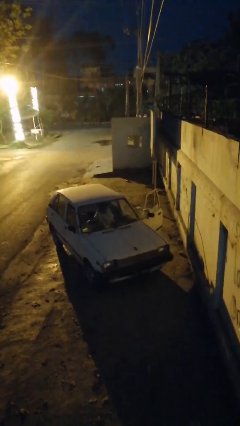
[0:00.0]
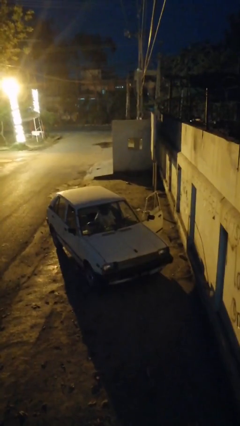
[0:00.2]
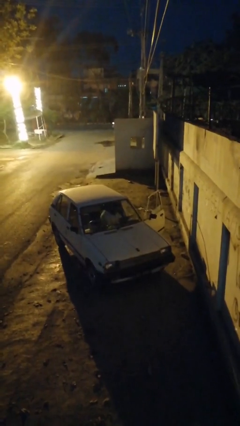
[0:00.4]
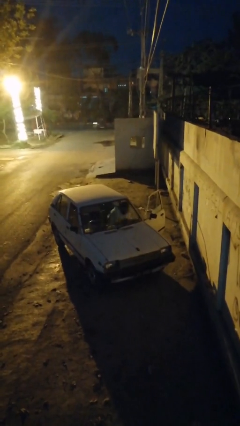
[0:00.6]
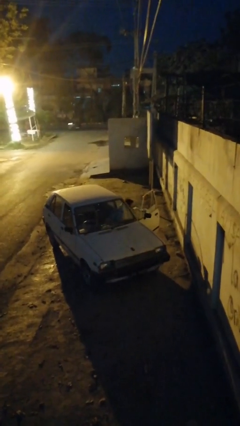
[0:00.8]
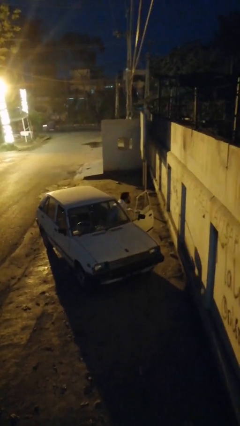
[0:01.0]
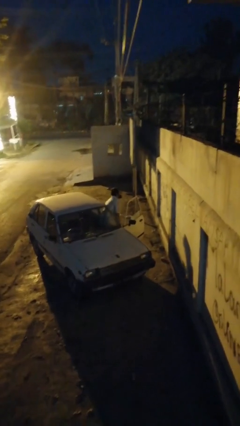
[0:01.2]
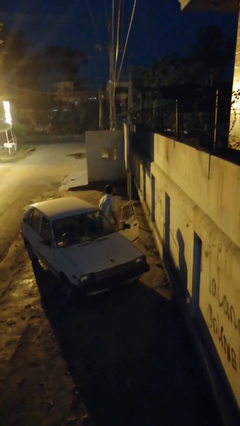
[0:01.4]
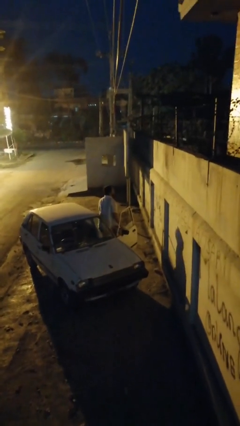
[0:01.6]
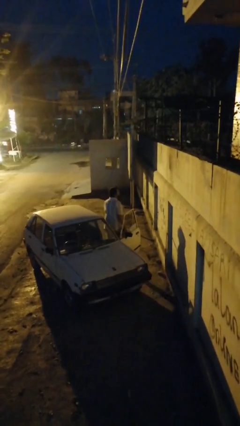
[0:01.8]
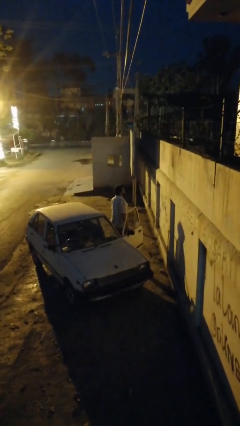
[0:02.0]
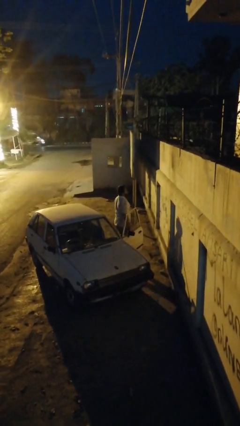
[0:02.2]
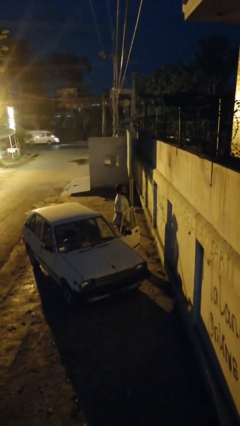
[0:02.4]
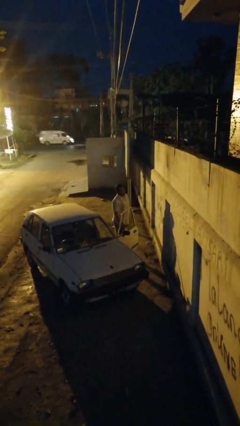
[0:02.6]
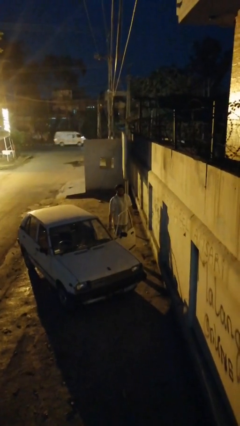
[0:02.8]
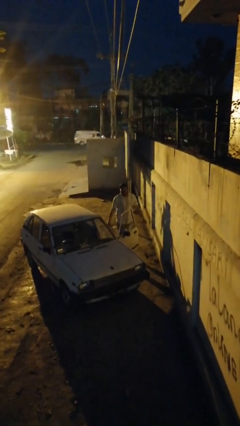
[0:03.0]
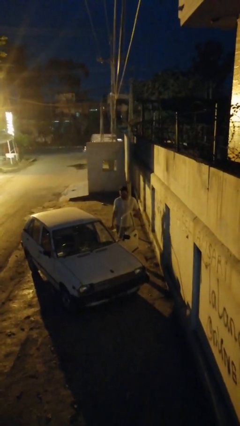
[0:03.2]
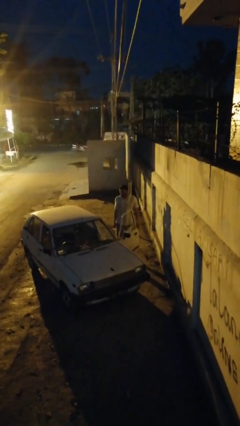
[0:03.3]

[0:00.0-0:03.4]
person exits car

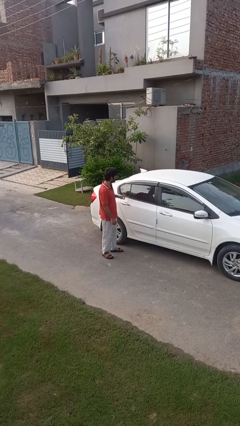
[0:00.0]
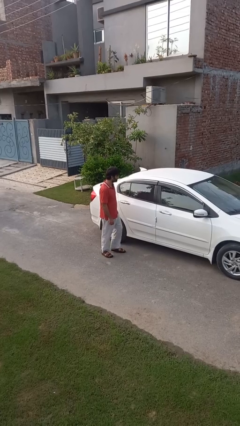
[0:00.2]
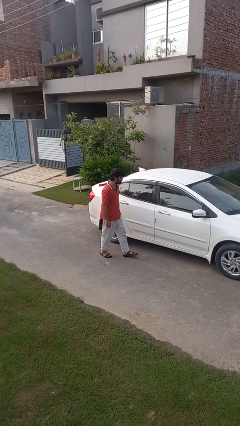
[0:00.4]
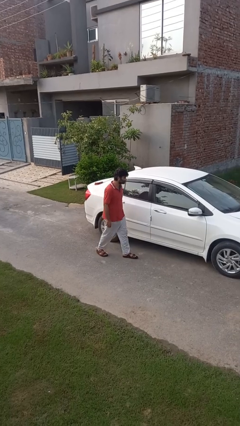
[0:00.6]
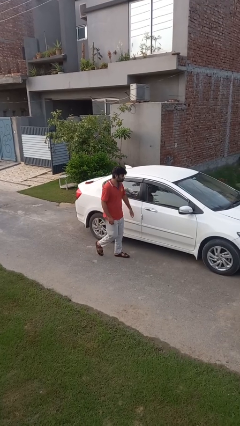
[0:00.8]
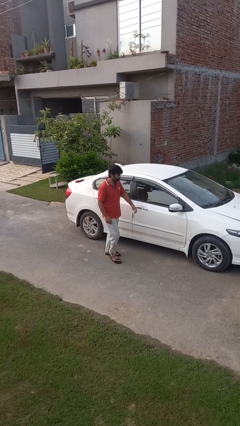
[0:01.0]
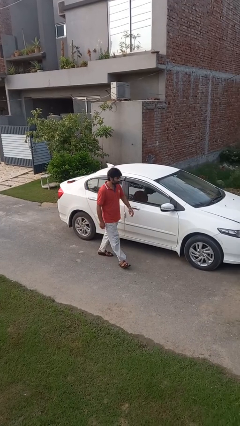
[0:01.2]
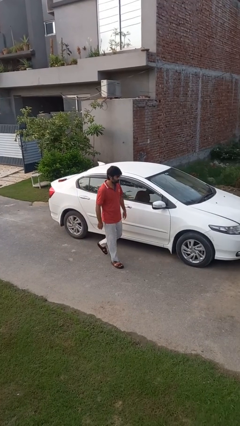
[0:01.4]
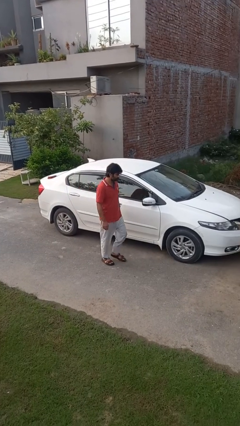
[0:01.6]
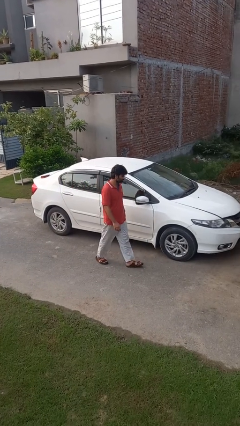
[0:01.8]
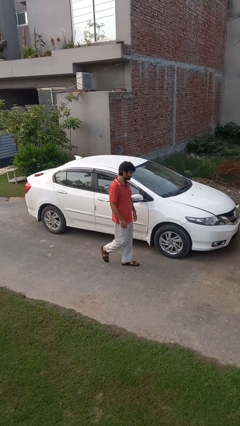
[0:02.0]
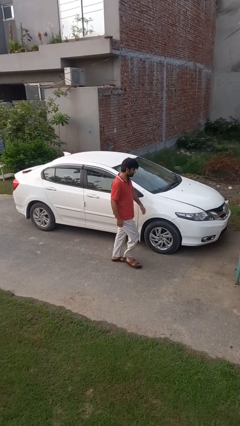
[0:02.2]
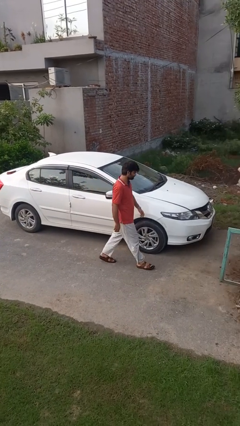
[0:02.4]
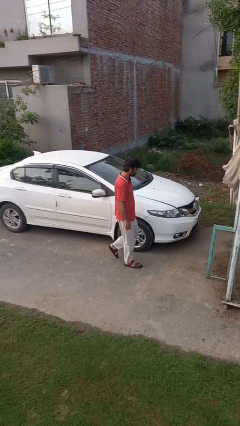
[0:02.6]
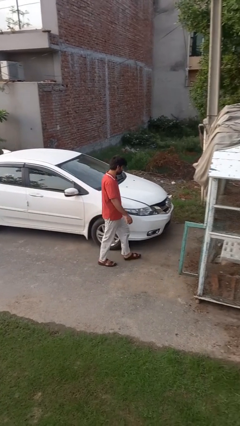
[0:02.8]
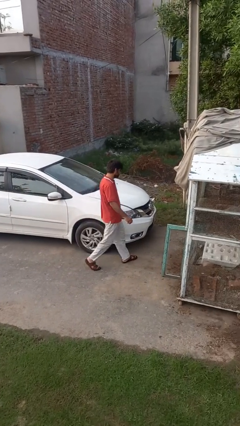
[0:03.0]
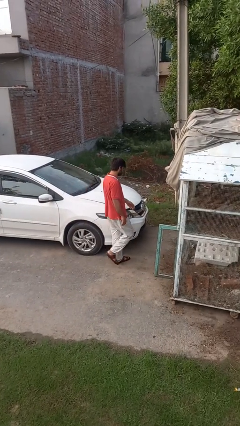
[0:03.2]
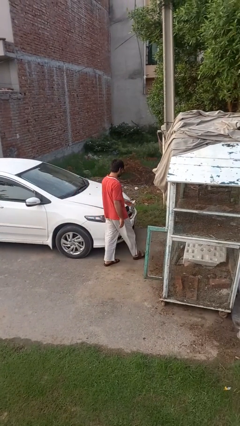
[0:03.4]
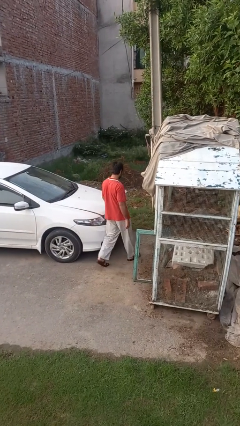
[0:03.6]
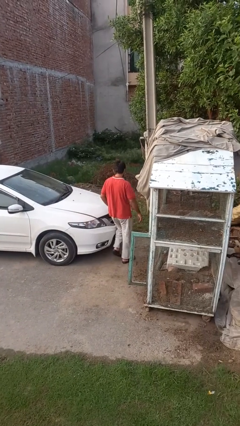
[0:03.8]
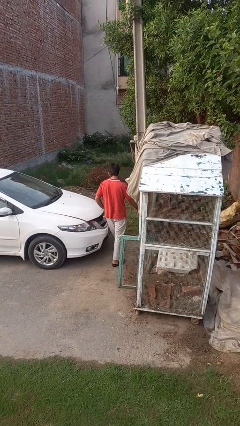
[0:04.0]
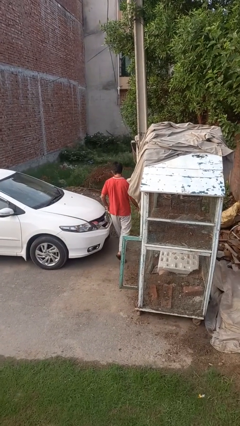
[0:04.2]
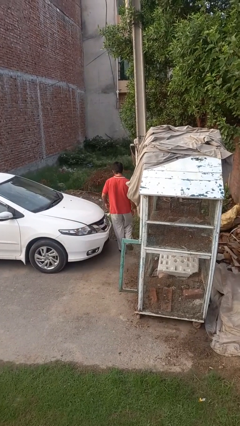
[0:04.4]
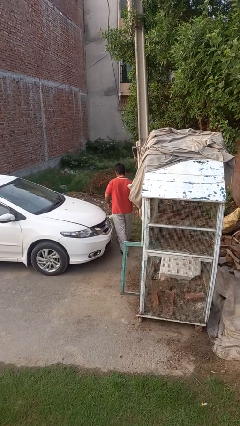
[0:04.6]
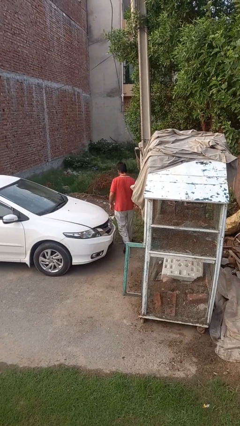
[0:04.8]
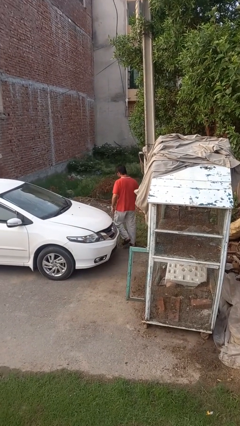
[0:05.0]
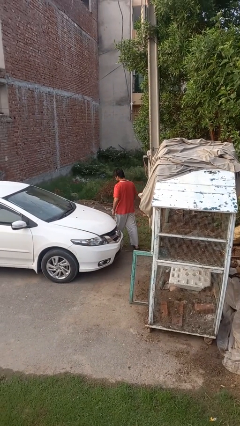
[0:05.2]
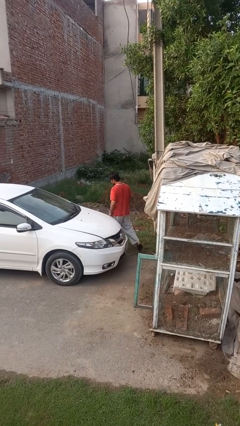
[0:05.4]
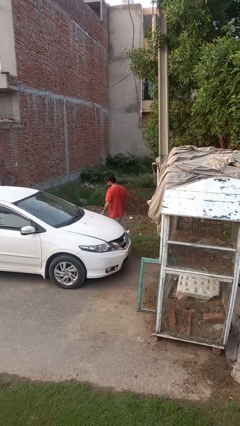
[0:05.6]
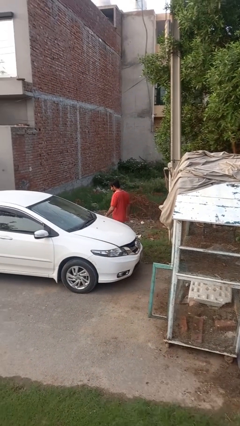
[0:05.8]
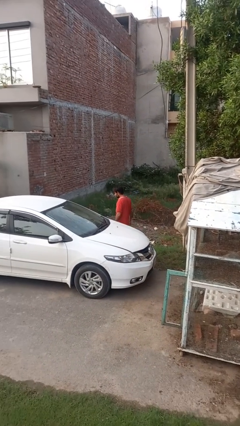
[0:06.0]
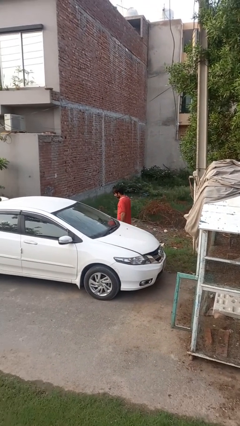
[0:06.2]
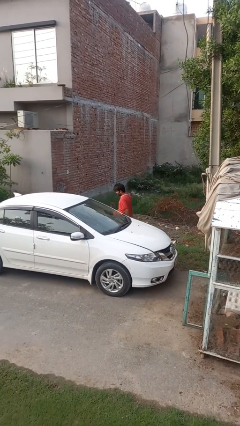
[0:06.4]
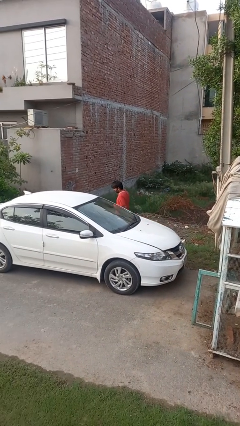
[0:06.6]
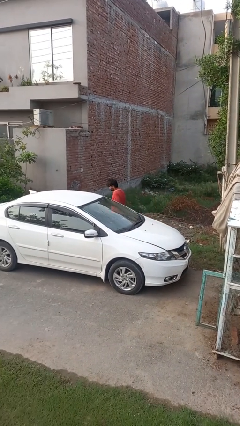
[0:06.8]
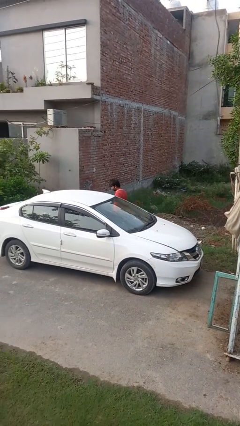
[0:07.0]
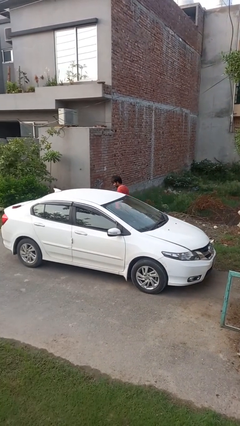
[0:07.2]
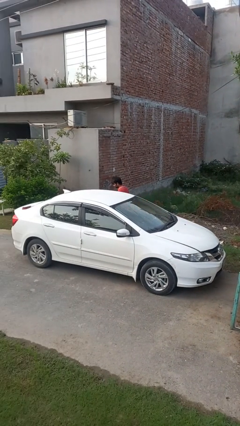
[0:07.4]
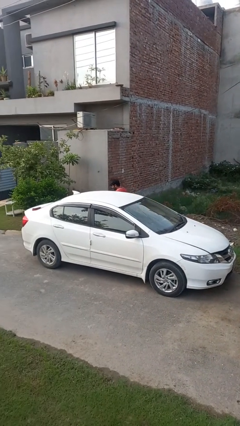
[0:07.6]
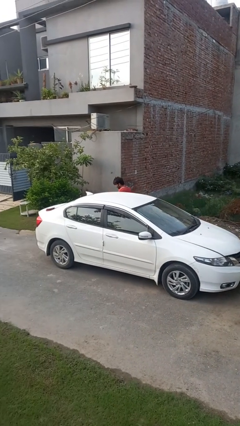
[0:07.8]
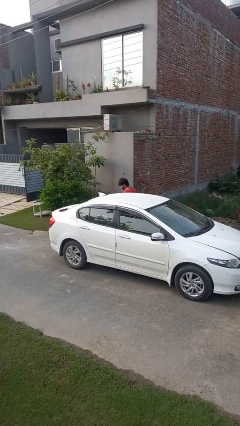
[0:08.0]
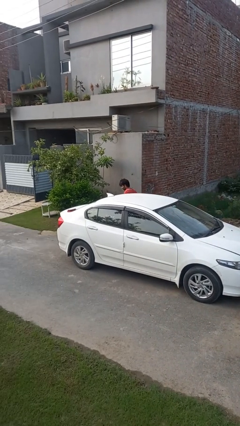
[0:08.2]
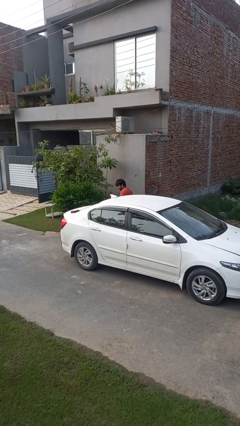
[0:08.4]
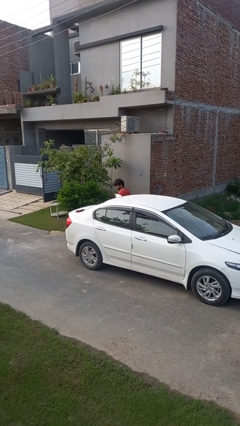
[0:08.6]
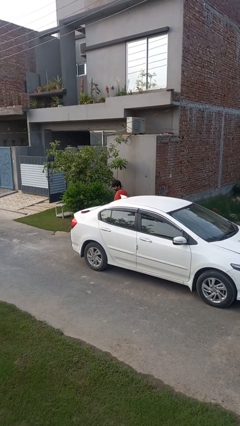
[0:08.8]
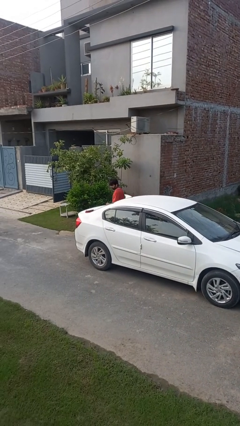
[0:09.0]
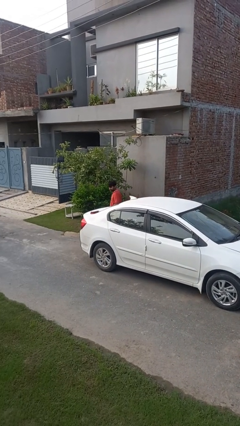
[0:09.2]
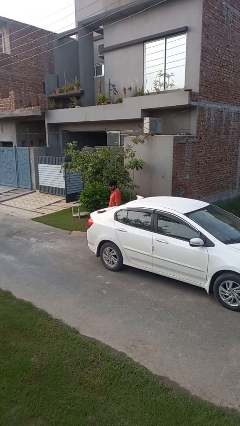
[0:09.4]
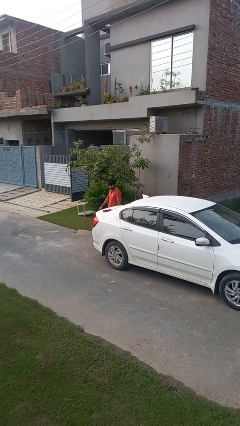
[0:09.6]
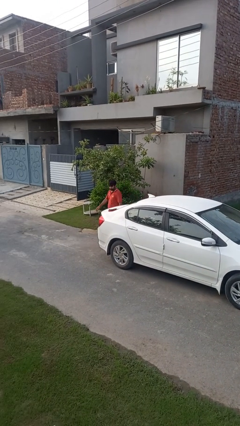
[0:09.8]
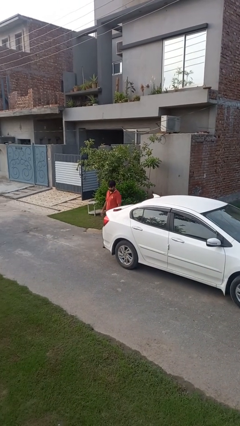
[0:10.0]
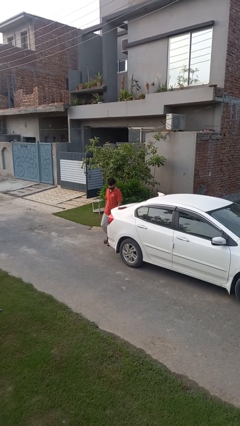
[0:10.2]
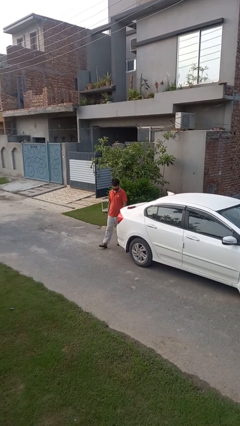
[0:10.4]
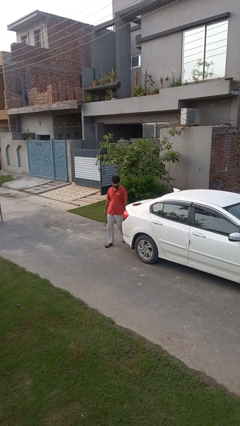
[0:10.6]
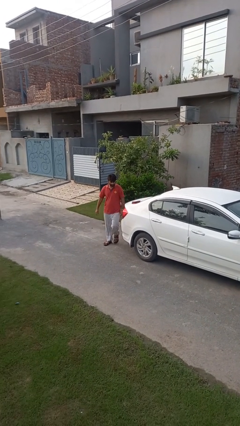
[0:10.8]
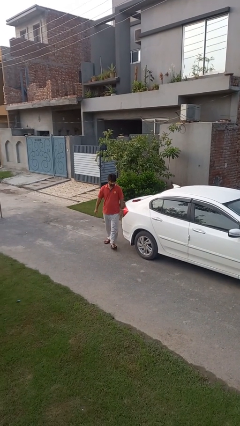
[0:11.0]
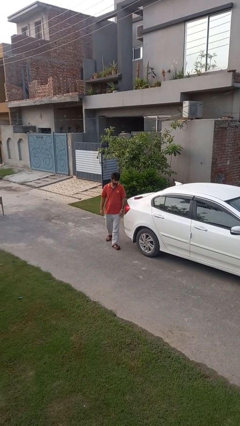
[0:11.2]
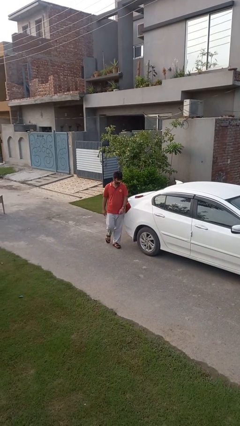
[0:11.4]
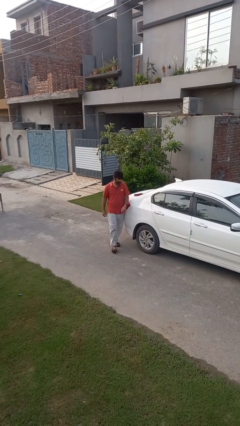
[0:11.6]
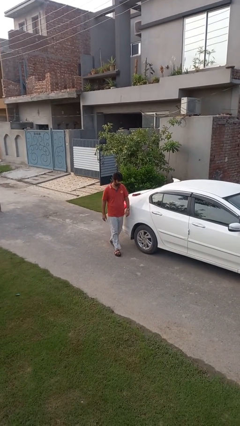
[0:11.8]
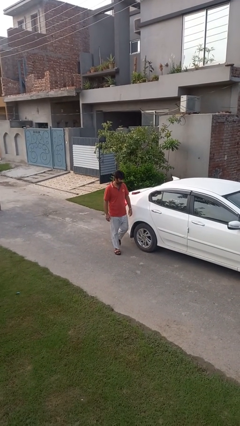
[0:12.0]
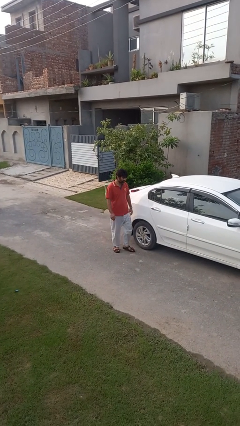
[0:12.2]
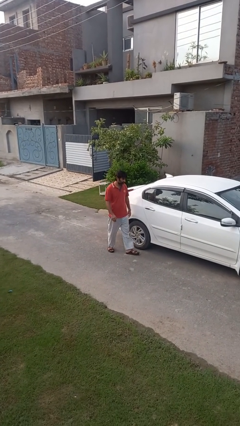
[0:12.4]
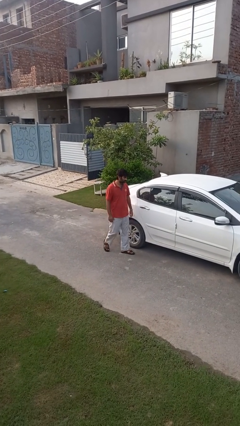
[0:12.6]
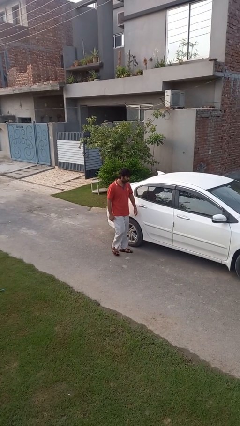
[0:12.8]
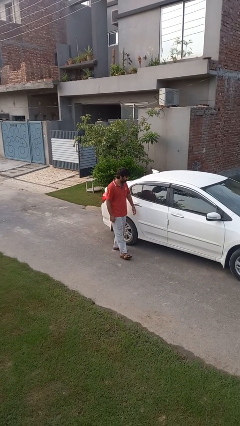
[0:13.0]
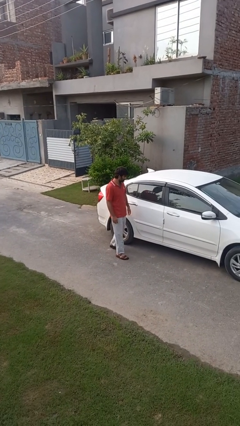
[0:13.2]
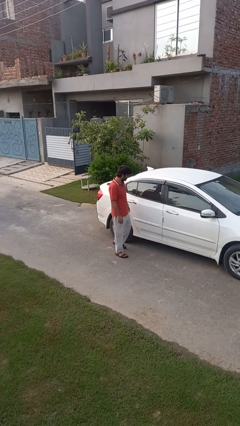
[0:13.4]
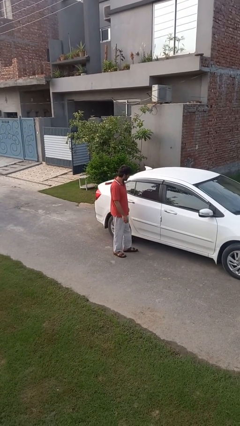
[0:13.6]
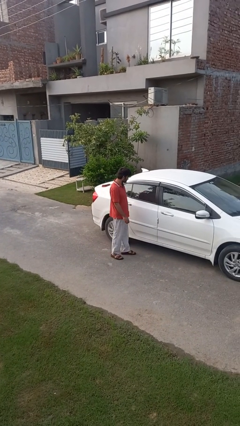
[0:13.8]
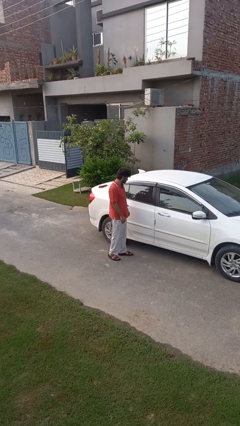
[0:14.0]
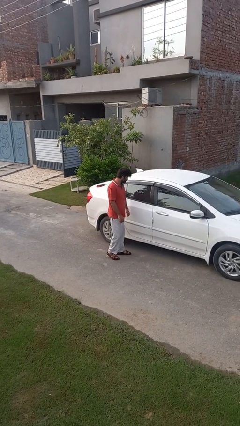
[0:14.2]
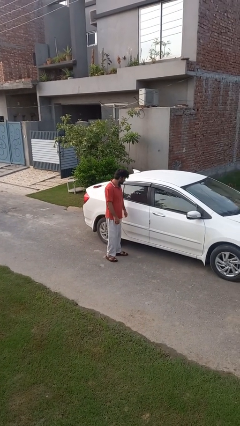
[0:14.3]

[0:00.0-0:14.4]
person walks around car
